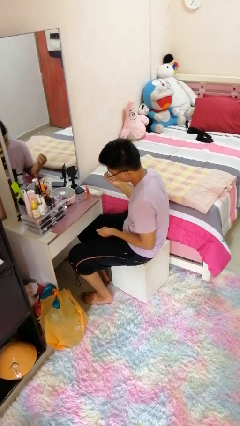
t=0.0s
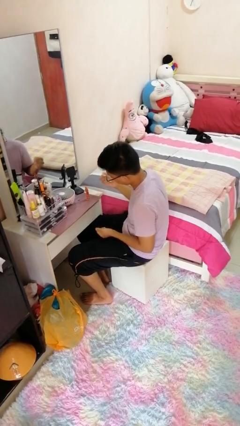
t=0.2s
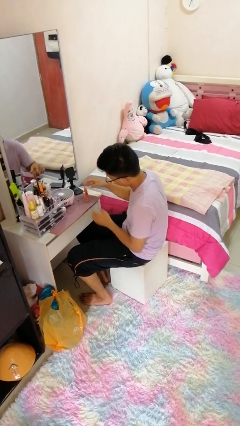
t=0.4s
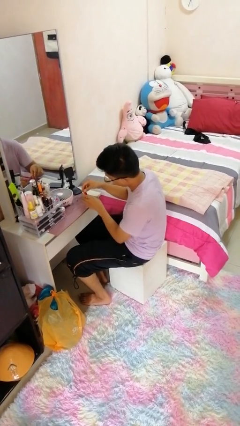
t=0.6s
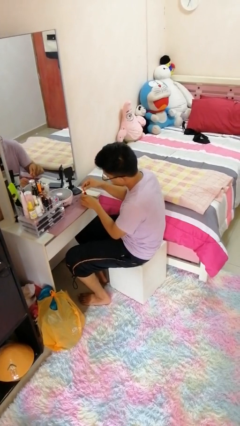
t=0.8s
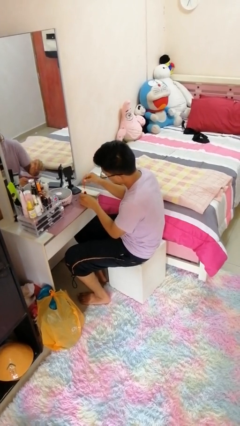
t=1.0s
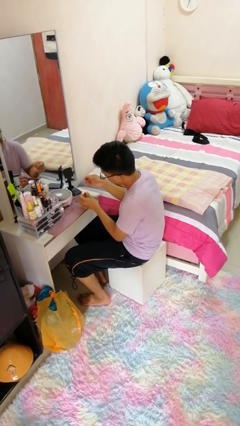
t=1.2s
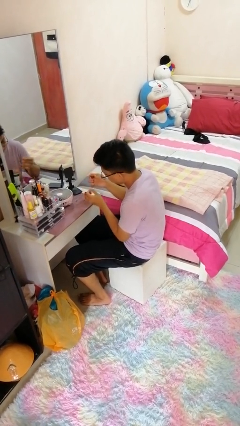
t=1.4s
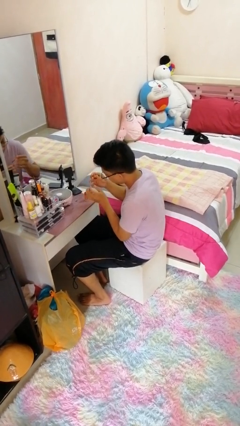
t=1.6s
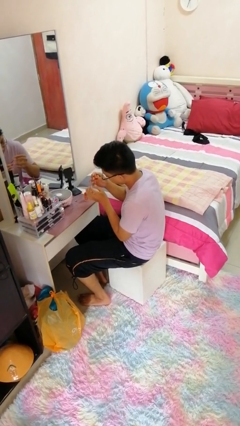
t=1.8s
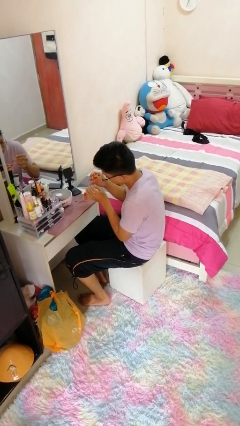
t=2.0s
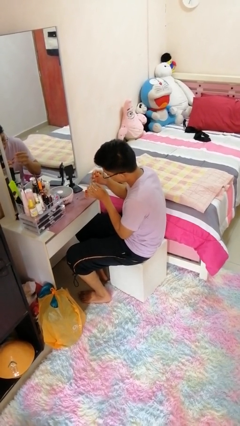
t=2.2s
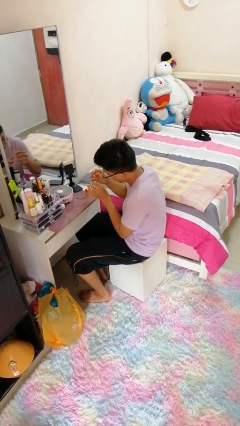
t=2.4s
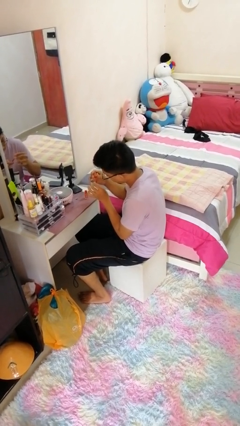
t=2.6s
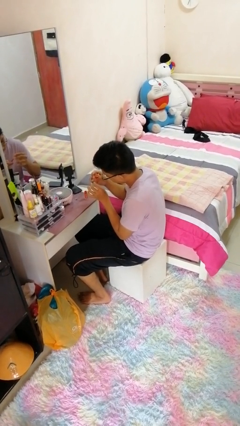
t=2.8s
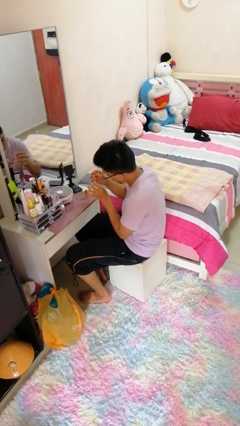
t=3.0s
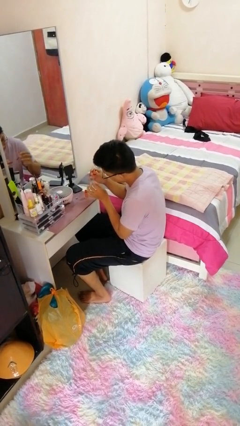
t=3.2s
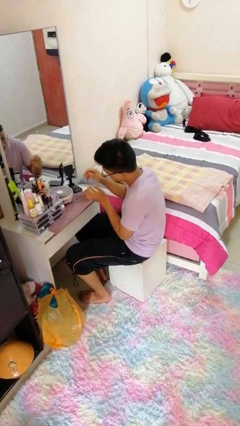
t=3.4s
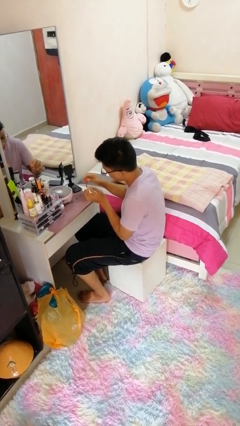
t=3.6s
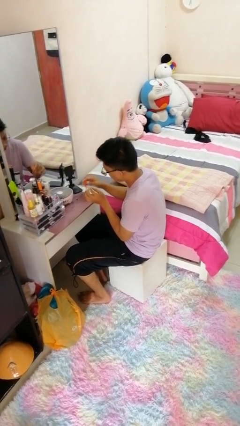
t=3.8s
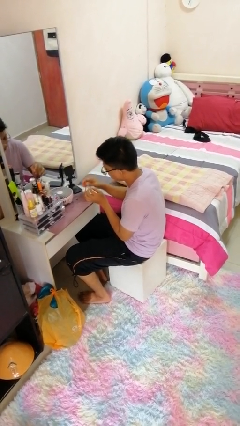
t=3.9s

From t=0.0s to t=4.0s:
person paints fingernails

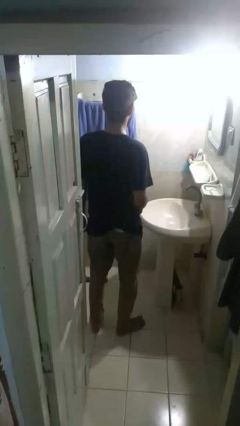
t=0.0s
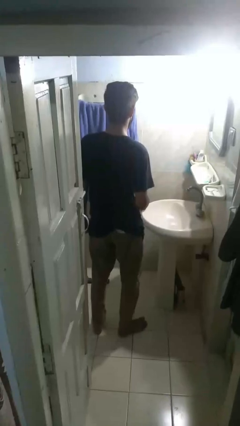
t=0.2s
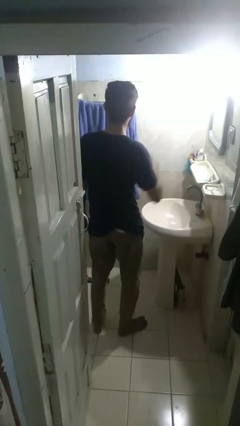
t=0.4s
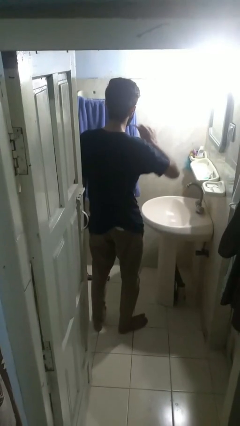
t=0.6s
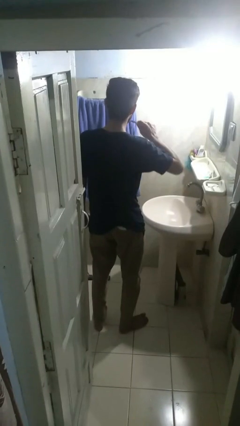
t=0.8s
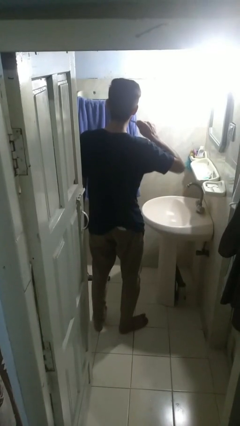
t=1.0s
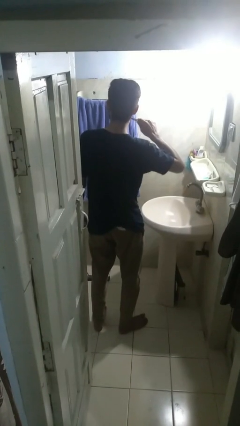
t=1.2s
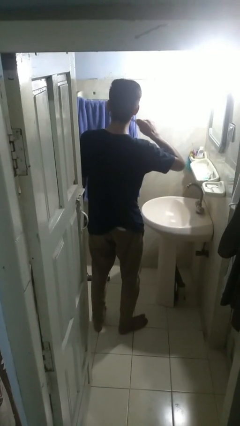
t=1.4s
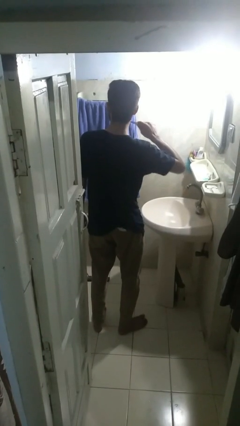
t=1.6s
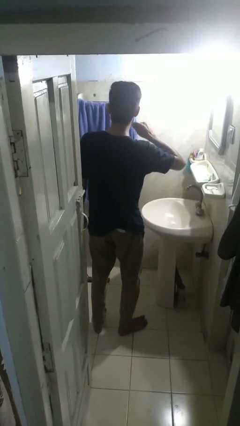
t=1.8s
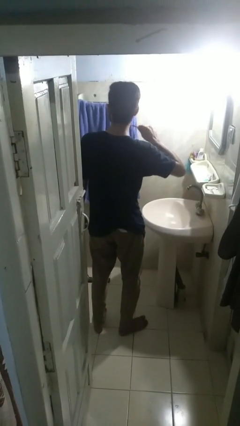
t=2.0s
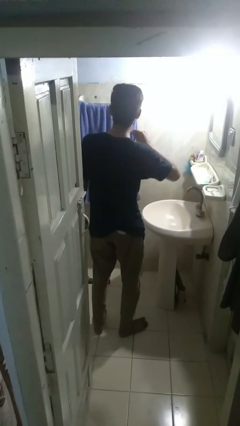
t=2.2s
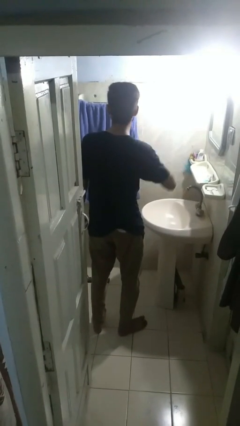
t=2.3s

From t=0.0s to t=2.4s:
person brushes teeth

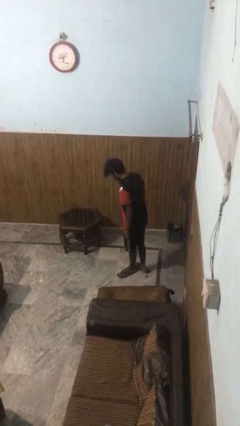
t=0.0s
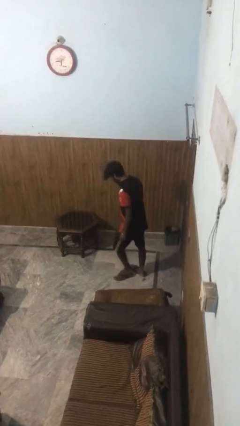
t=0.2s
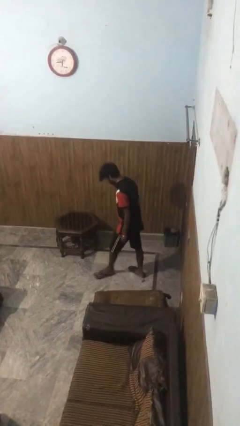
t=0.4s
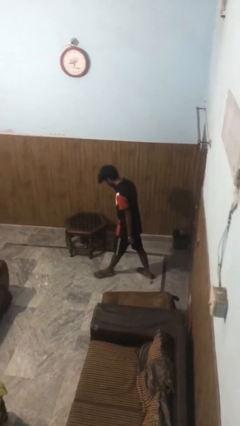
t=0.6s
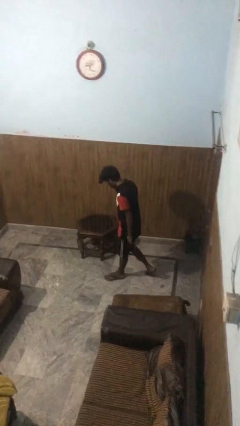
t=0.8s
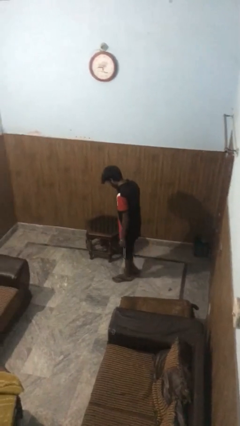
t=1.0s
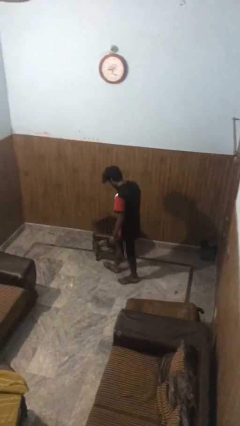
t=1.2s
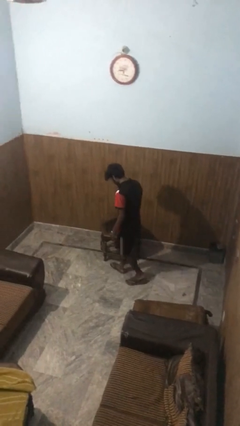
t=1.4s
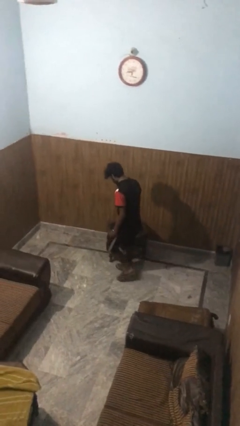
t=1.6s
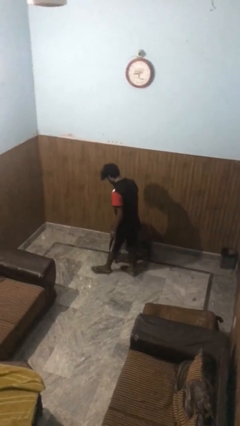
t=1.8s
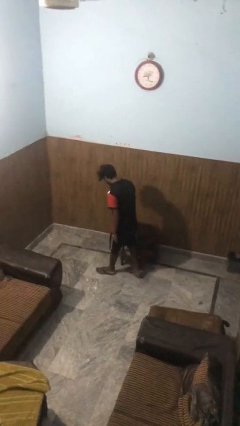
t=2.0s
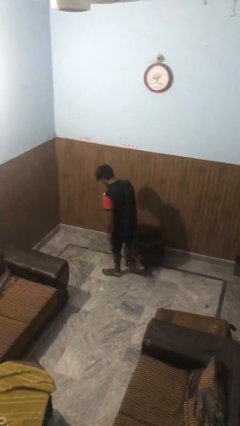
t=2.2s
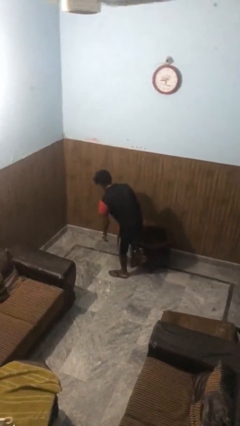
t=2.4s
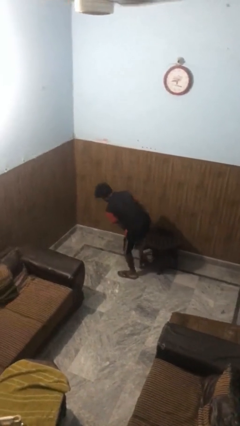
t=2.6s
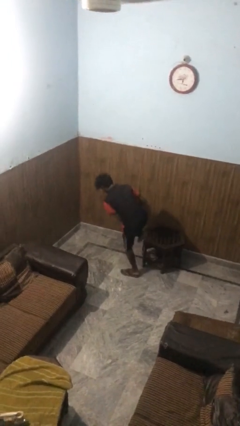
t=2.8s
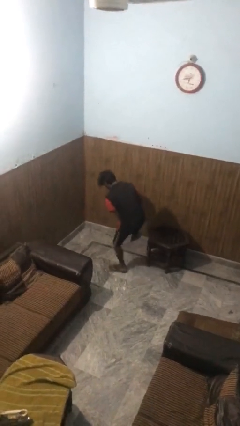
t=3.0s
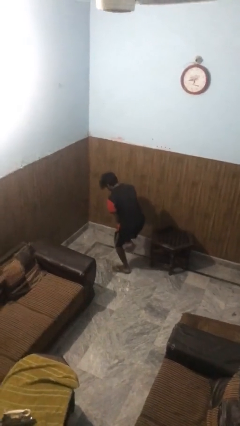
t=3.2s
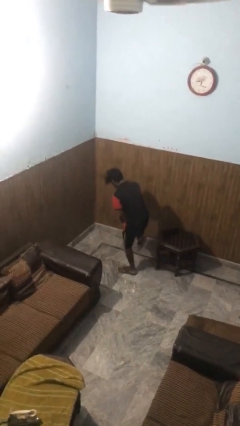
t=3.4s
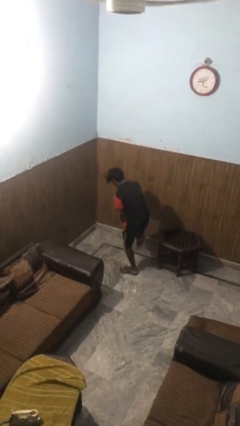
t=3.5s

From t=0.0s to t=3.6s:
person bumps into table

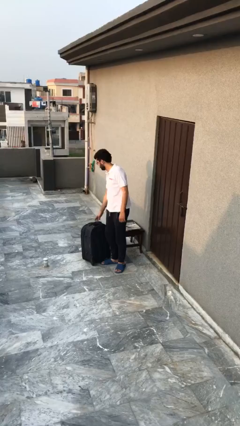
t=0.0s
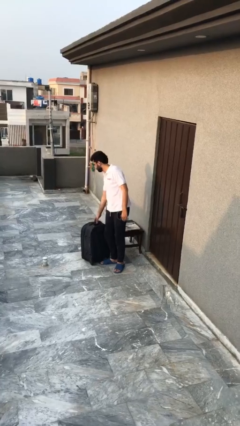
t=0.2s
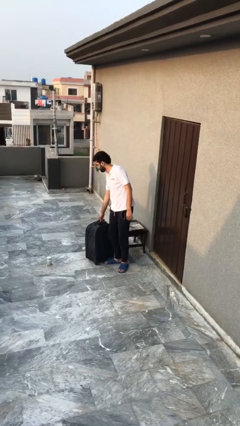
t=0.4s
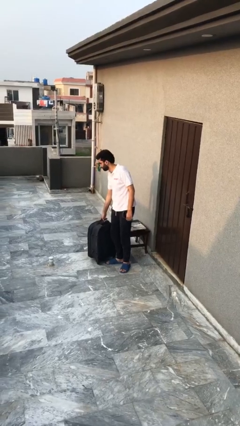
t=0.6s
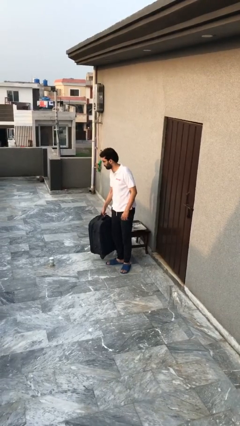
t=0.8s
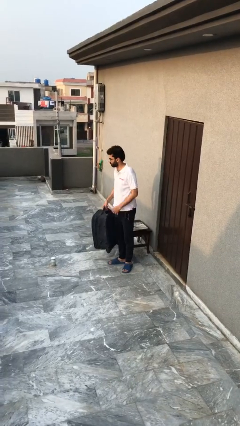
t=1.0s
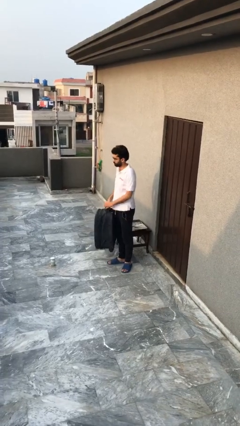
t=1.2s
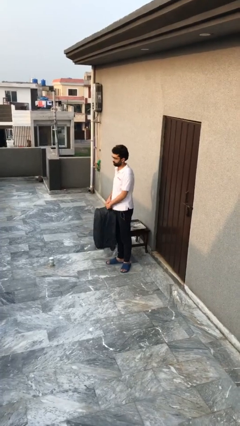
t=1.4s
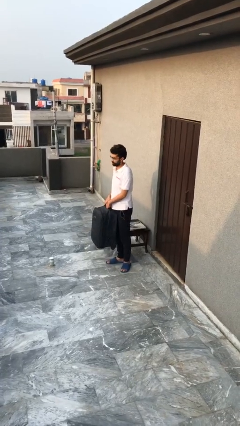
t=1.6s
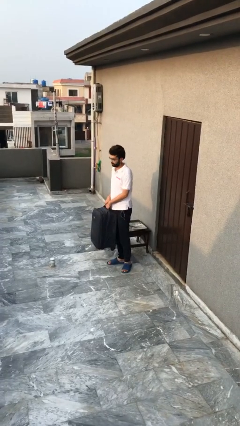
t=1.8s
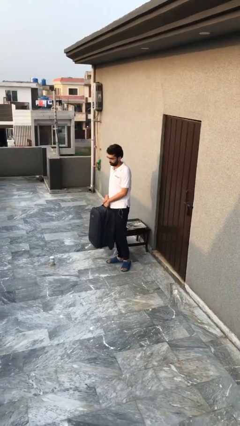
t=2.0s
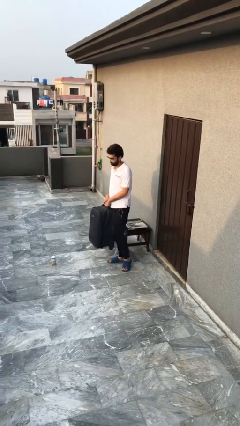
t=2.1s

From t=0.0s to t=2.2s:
person picks up object from floor

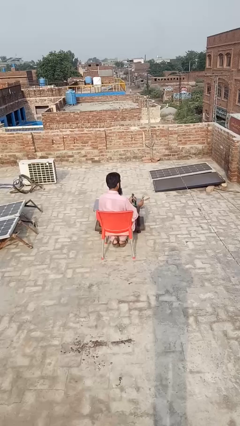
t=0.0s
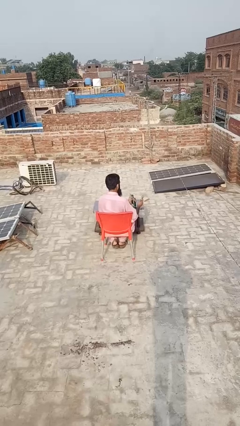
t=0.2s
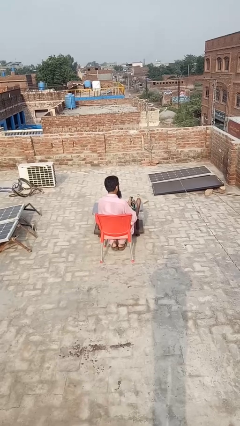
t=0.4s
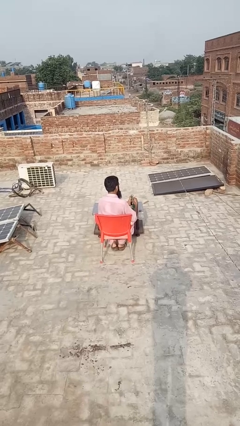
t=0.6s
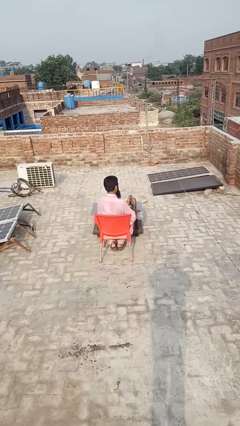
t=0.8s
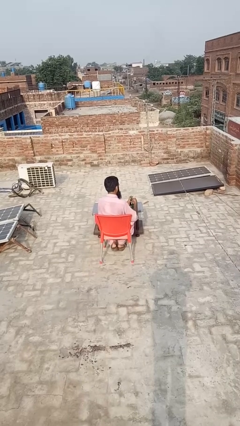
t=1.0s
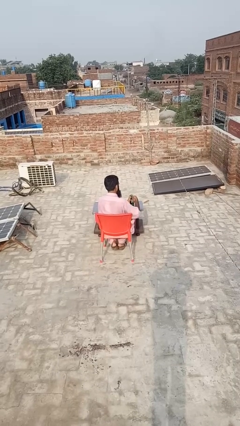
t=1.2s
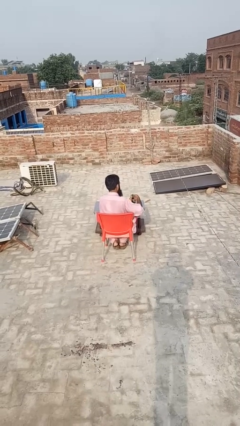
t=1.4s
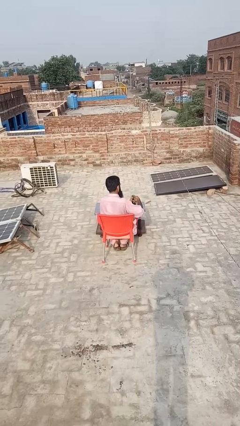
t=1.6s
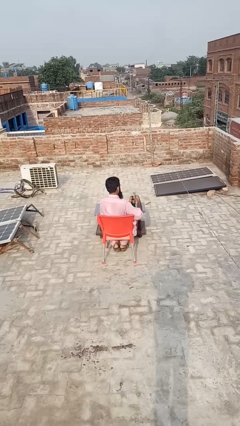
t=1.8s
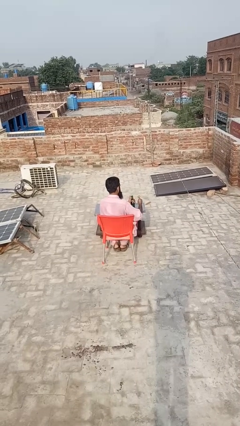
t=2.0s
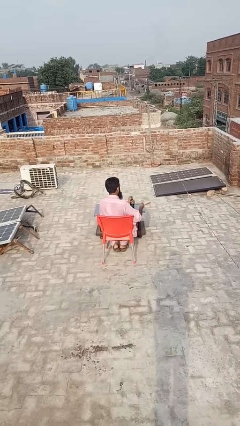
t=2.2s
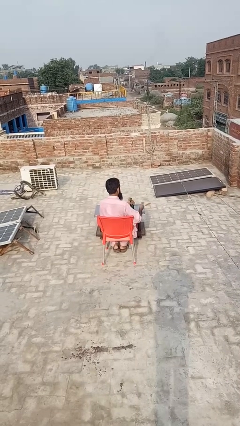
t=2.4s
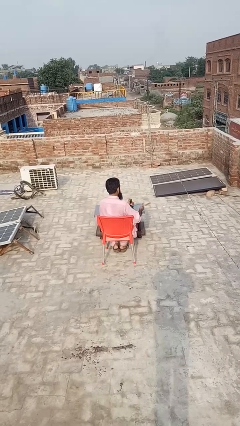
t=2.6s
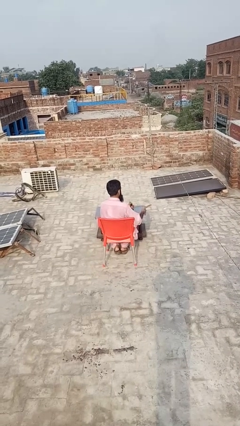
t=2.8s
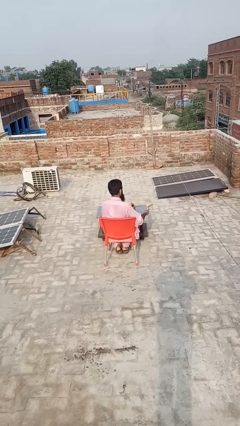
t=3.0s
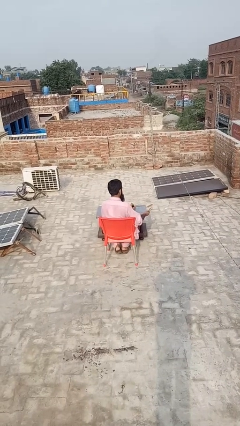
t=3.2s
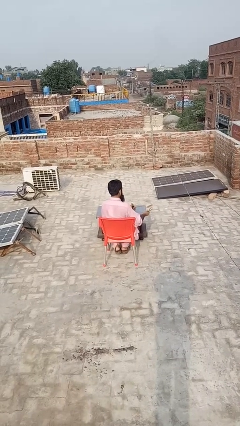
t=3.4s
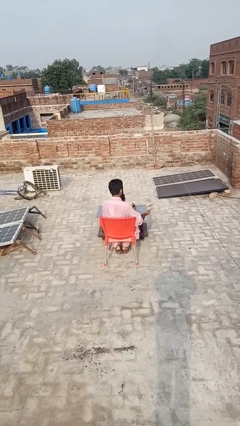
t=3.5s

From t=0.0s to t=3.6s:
person opens can with can opener

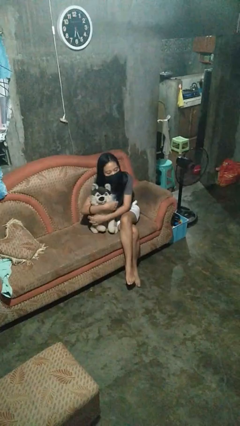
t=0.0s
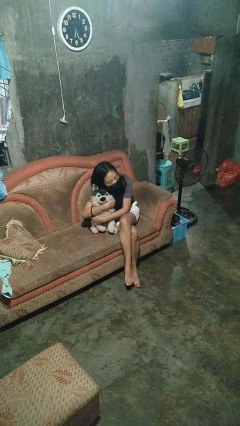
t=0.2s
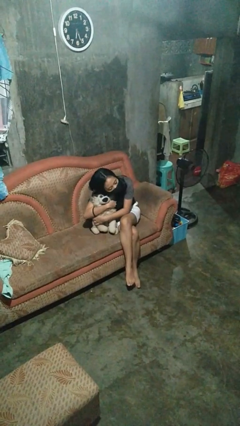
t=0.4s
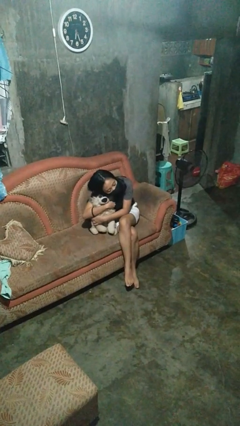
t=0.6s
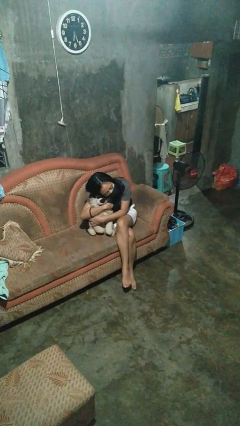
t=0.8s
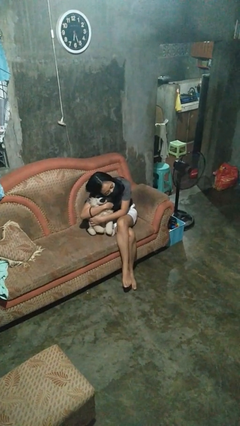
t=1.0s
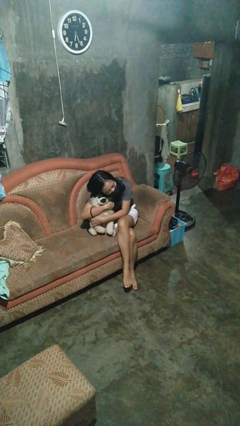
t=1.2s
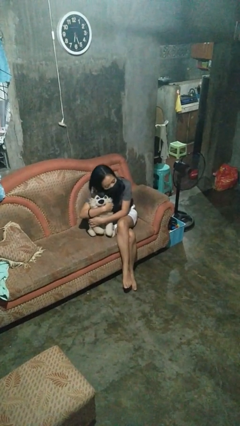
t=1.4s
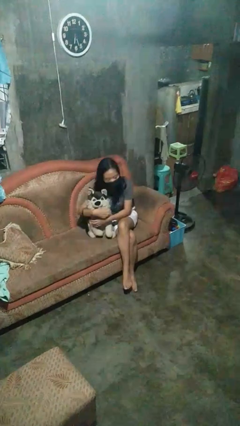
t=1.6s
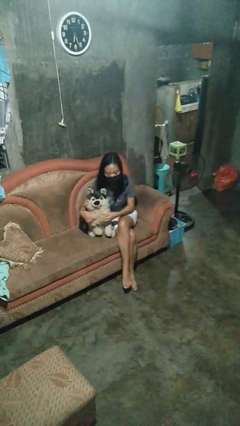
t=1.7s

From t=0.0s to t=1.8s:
person hugs stuffed animal
